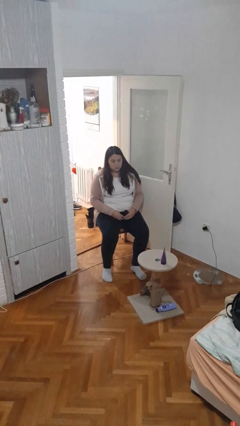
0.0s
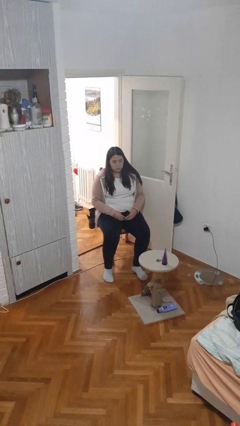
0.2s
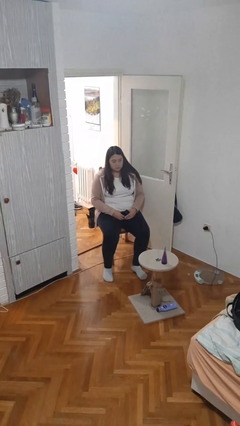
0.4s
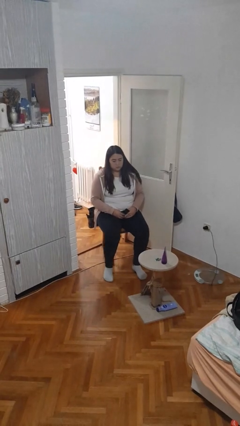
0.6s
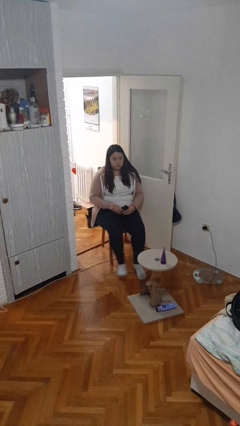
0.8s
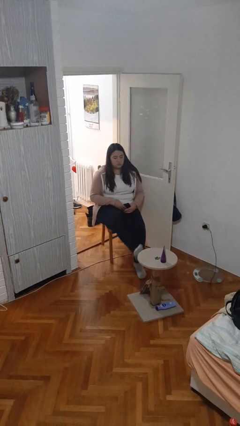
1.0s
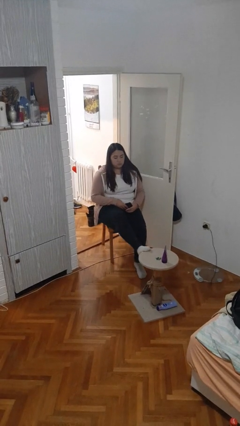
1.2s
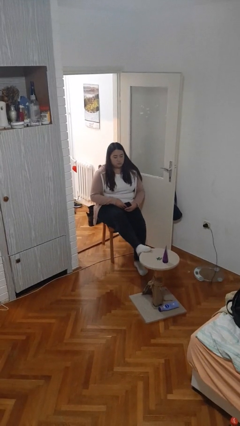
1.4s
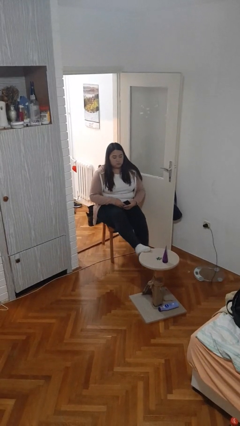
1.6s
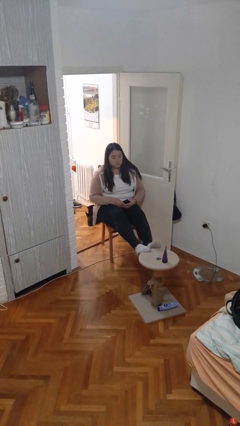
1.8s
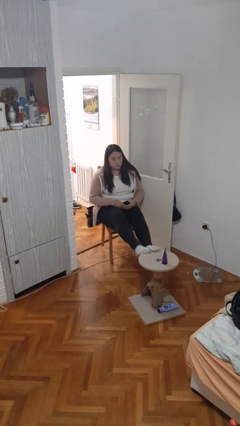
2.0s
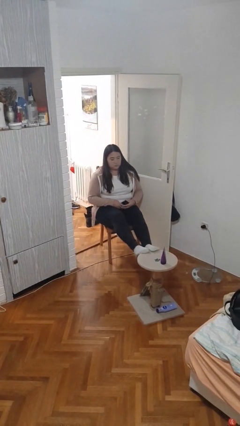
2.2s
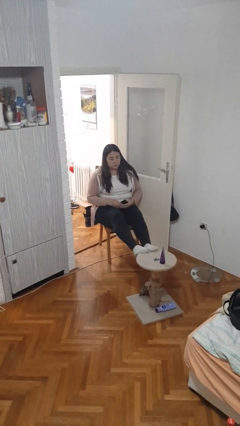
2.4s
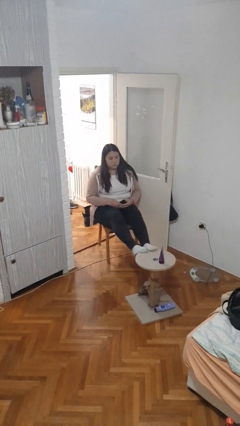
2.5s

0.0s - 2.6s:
person puts feet up

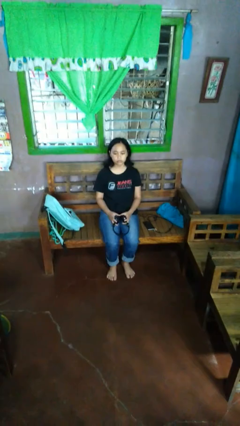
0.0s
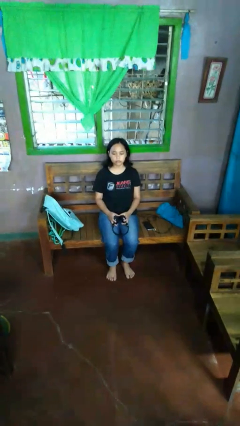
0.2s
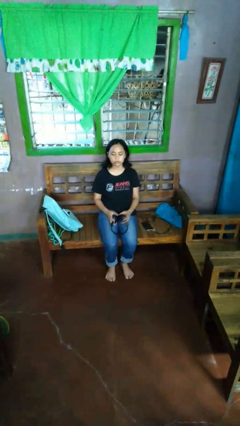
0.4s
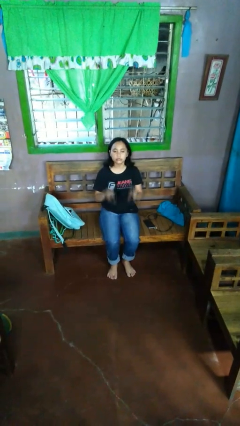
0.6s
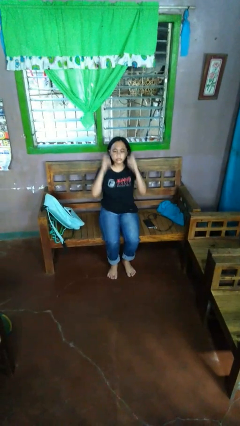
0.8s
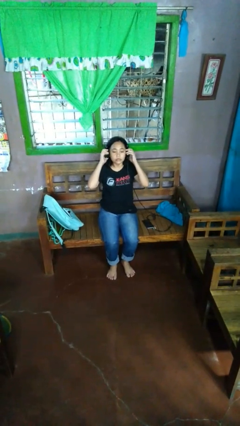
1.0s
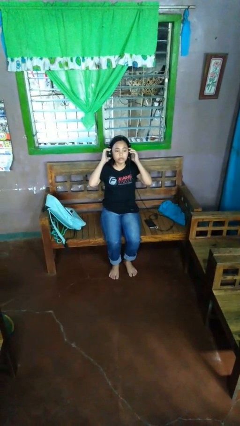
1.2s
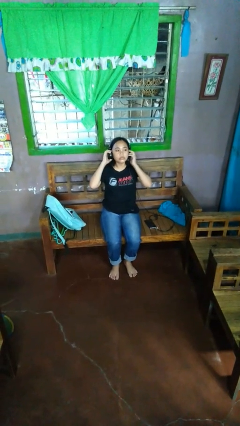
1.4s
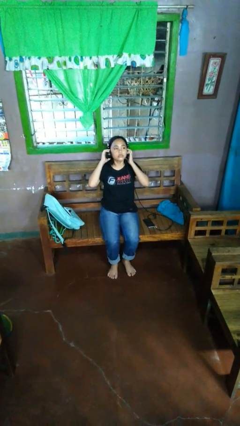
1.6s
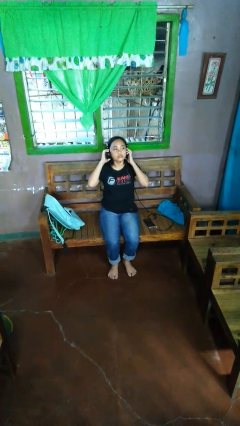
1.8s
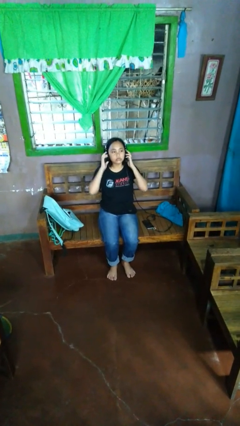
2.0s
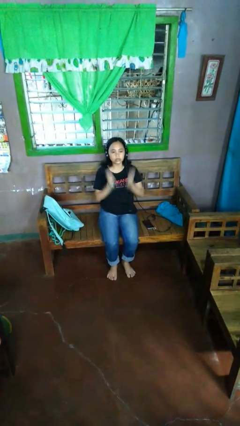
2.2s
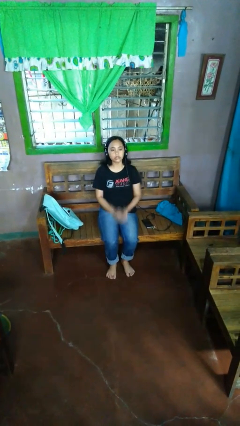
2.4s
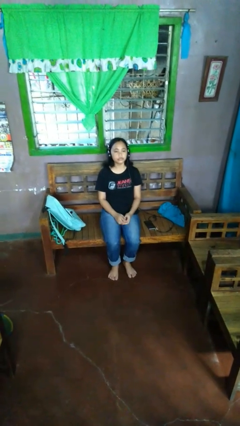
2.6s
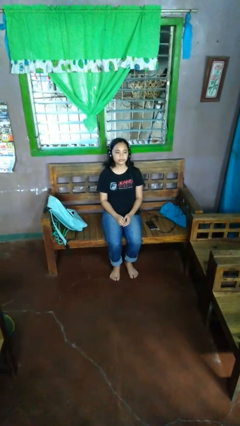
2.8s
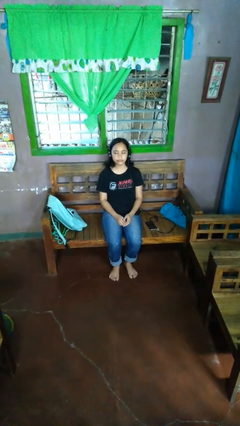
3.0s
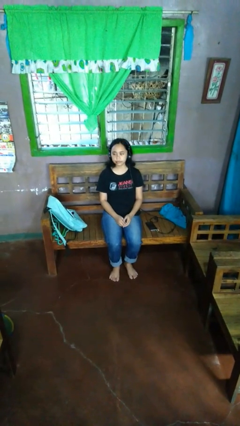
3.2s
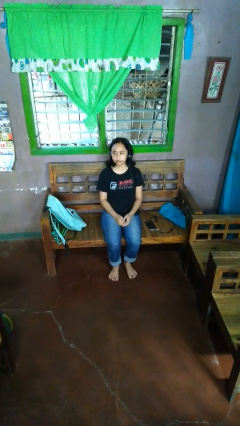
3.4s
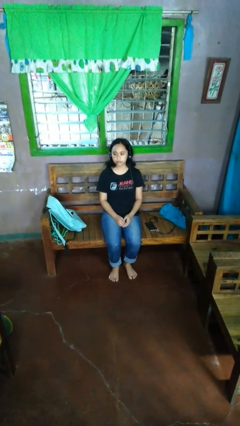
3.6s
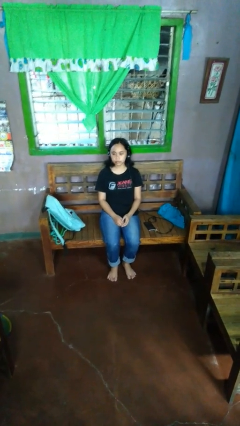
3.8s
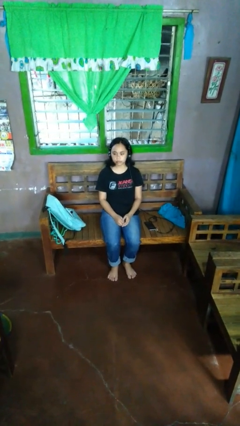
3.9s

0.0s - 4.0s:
person puts on headphones

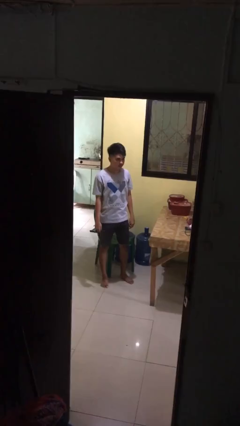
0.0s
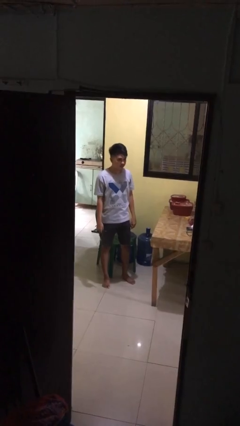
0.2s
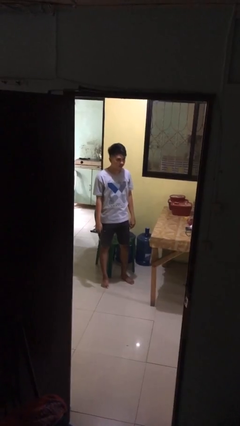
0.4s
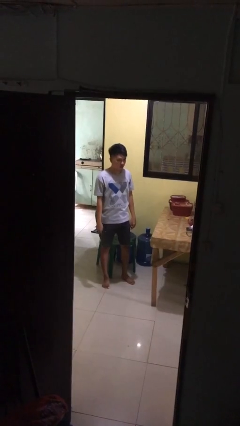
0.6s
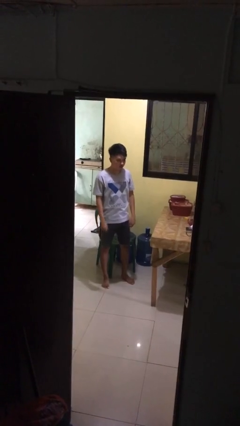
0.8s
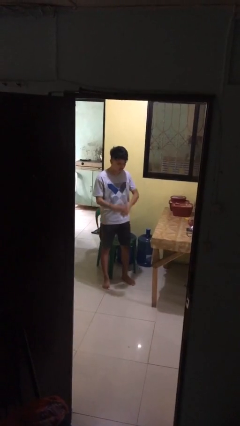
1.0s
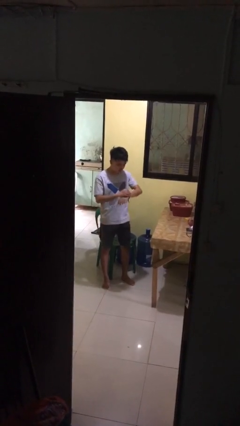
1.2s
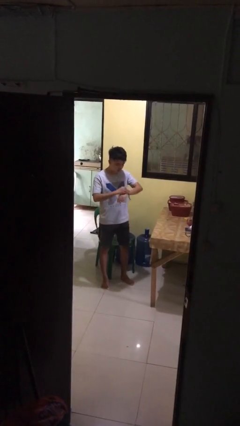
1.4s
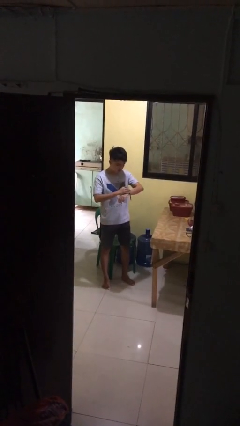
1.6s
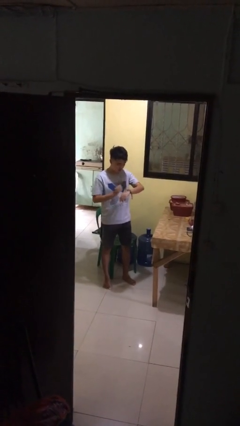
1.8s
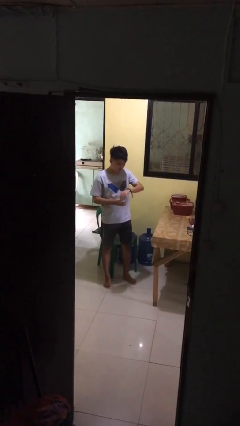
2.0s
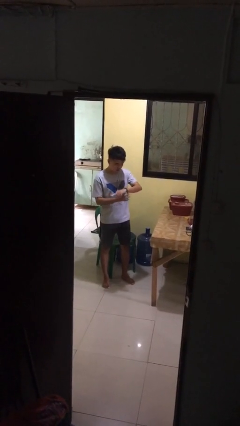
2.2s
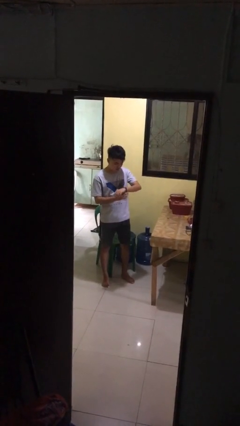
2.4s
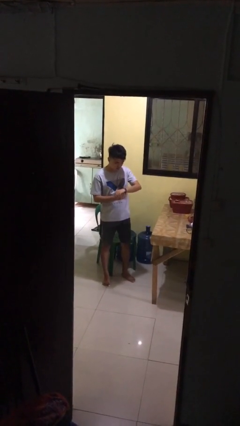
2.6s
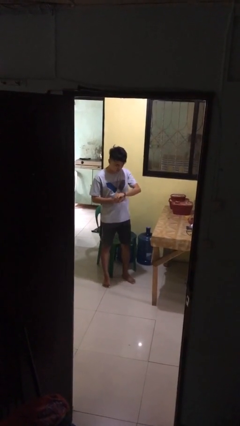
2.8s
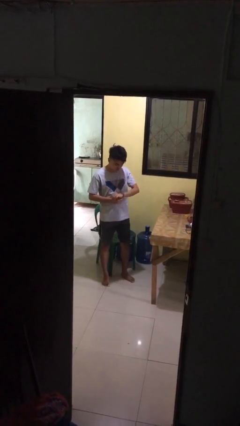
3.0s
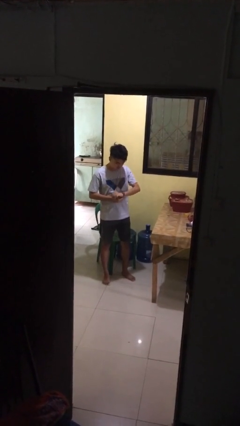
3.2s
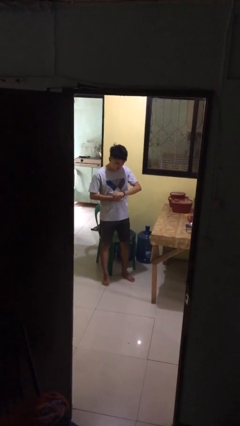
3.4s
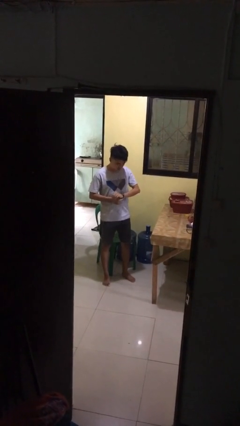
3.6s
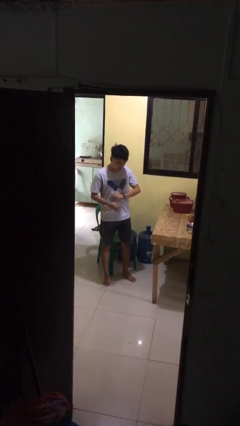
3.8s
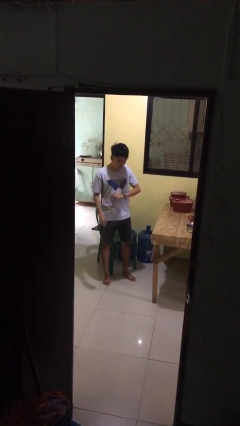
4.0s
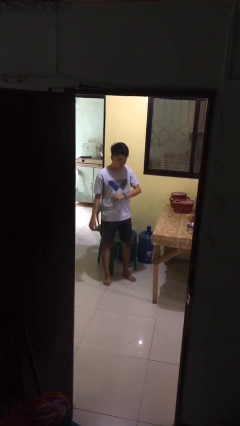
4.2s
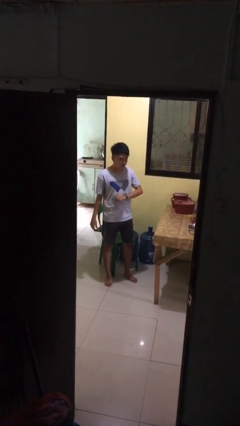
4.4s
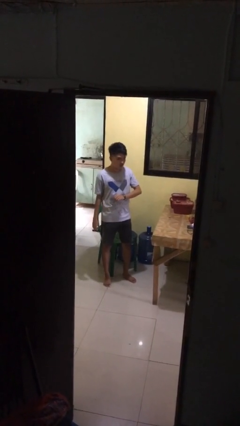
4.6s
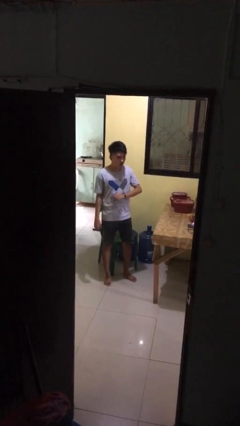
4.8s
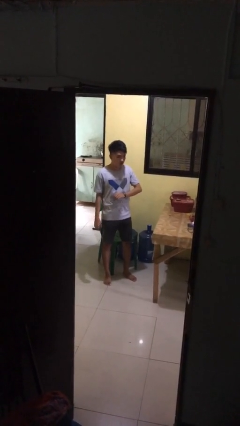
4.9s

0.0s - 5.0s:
person puts on wristwatch

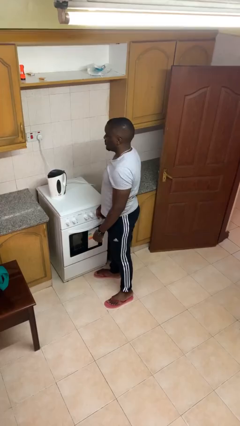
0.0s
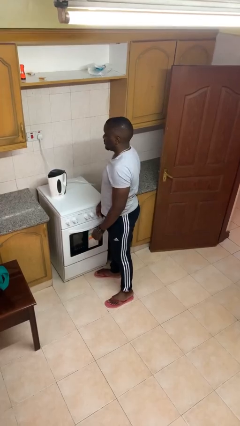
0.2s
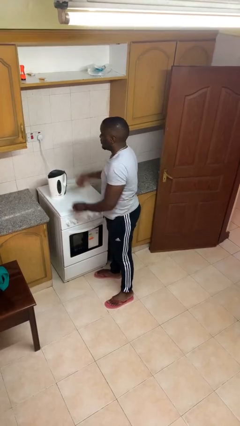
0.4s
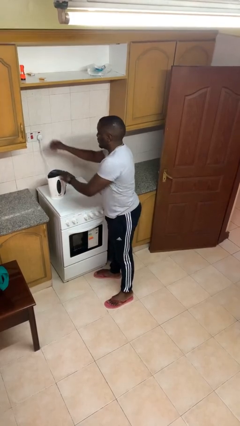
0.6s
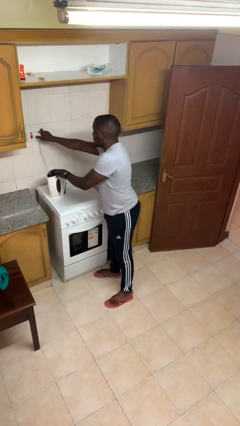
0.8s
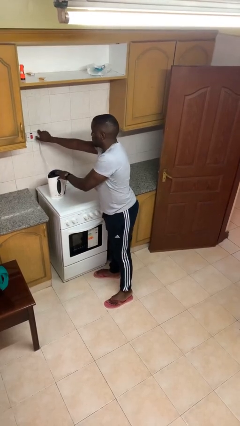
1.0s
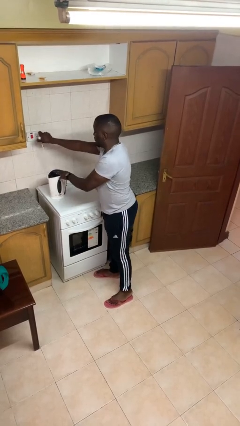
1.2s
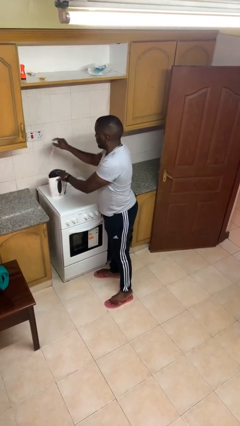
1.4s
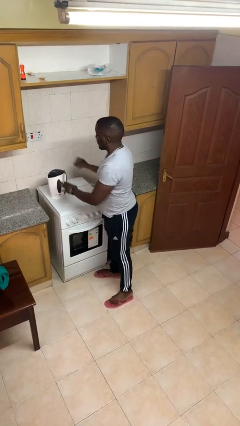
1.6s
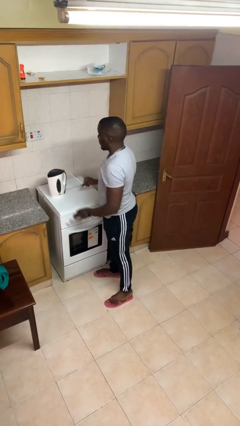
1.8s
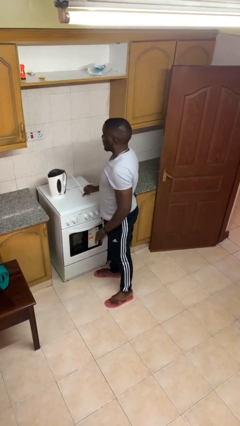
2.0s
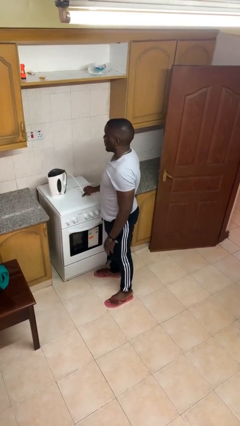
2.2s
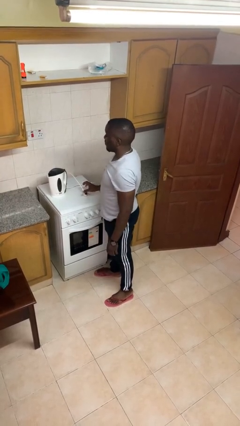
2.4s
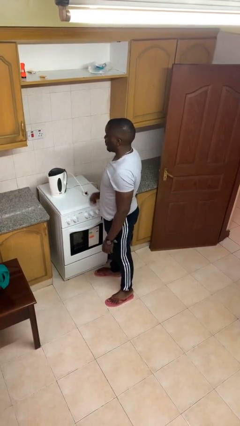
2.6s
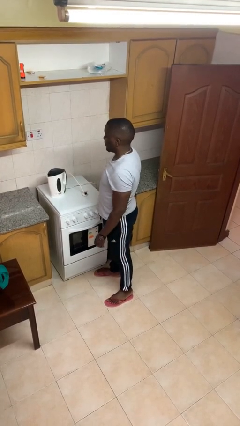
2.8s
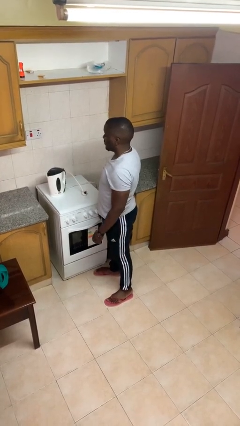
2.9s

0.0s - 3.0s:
person unplugs from electrical socket

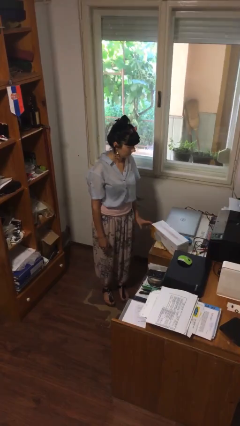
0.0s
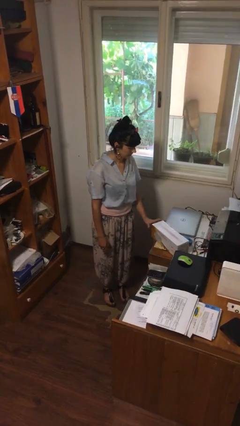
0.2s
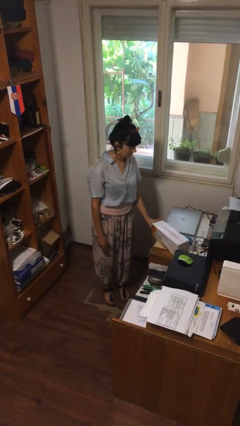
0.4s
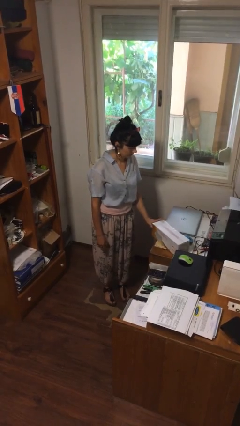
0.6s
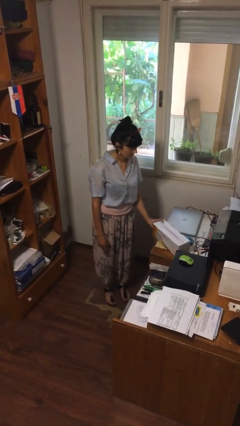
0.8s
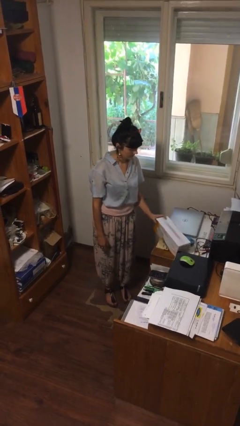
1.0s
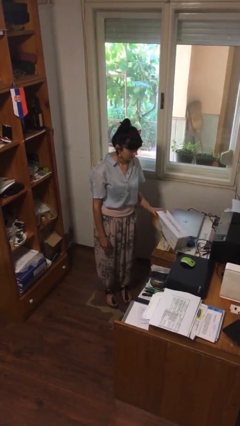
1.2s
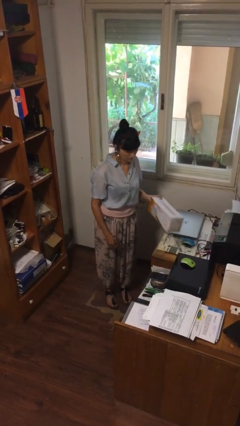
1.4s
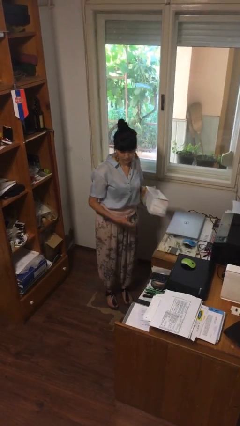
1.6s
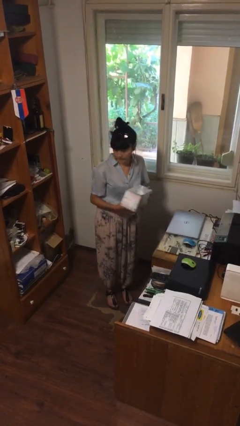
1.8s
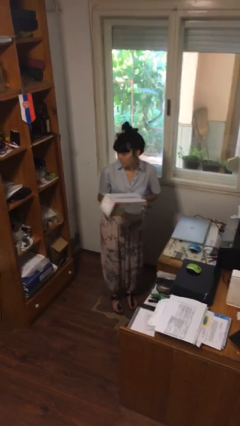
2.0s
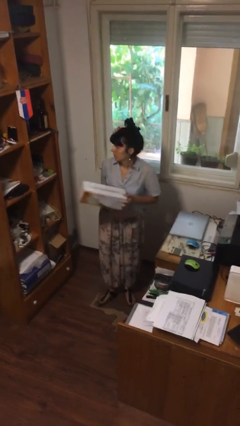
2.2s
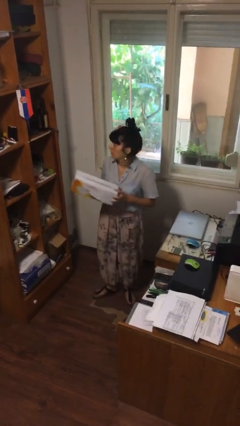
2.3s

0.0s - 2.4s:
person picks up object from table

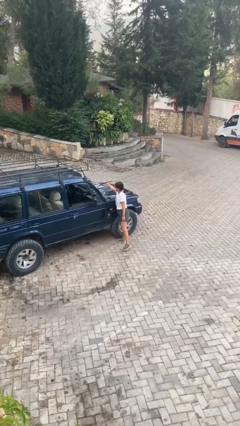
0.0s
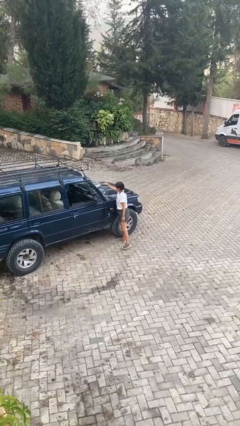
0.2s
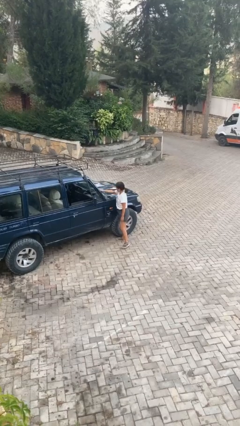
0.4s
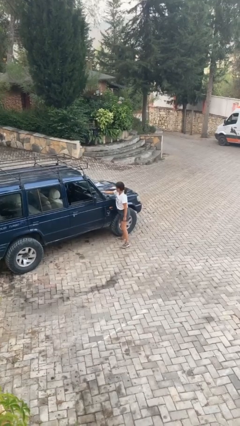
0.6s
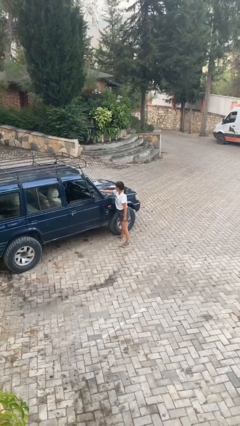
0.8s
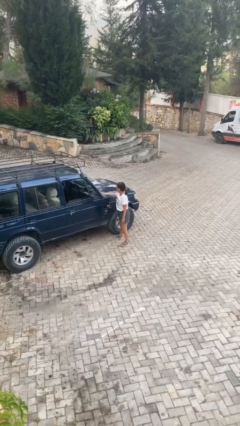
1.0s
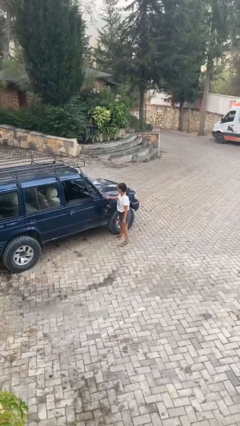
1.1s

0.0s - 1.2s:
person flips down car wipers
